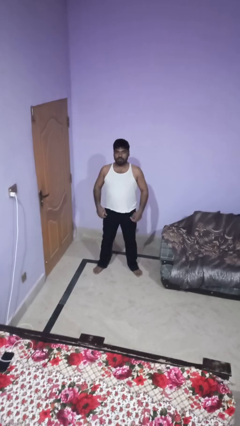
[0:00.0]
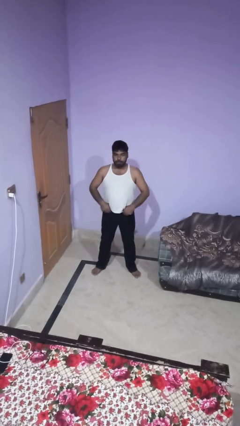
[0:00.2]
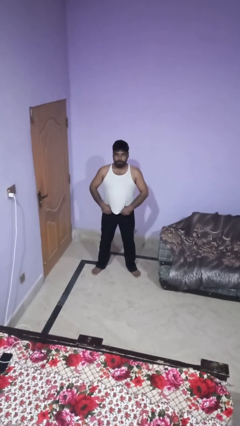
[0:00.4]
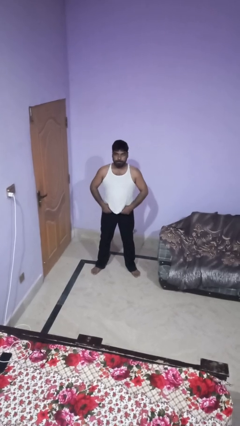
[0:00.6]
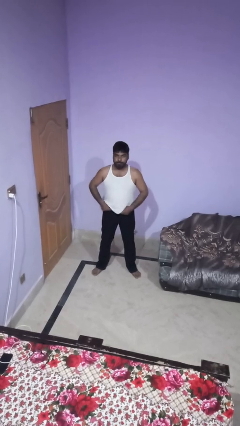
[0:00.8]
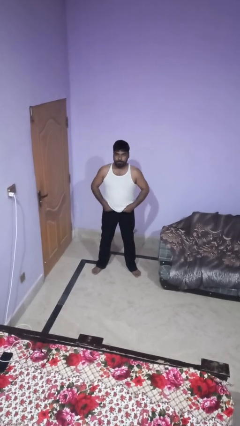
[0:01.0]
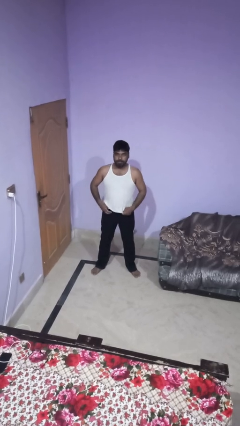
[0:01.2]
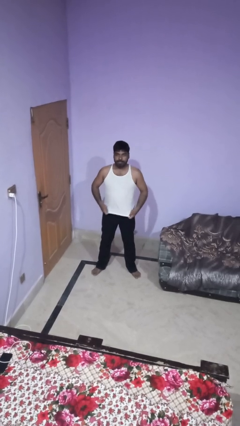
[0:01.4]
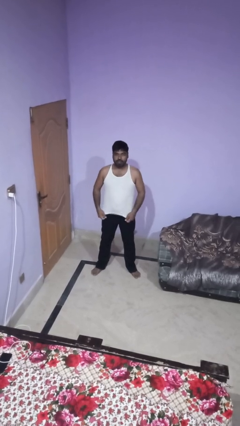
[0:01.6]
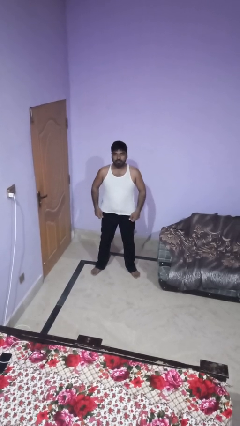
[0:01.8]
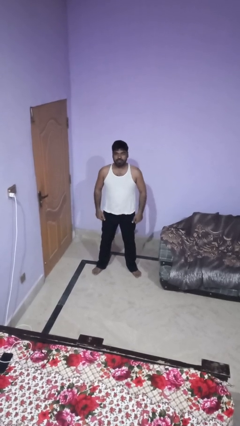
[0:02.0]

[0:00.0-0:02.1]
person hikes up pants

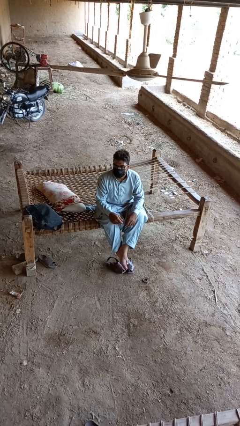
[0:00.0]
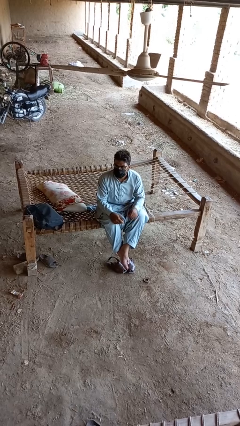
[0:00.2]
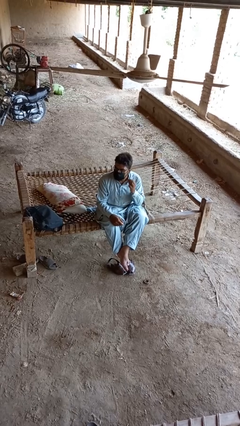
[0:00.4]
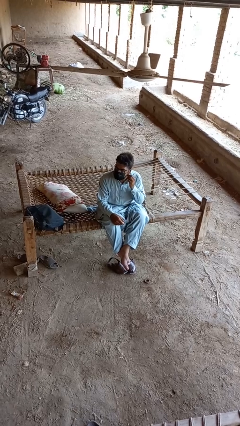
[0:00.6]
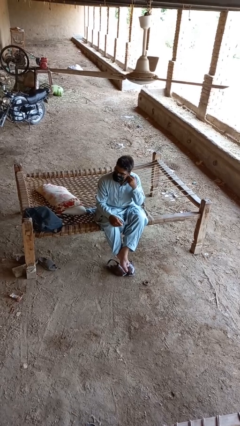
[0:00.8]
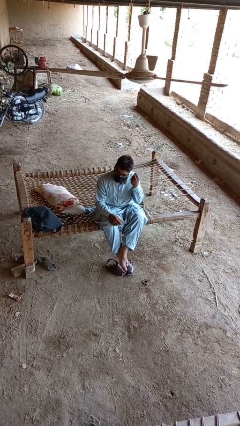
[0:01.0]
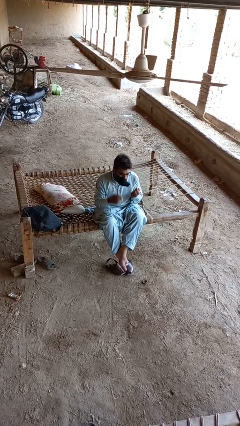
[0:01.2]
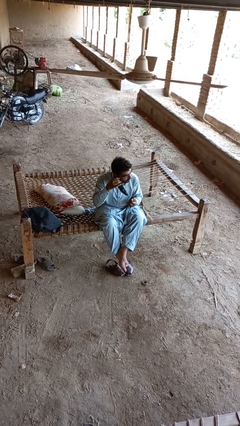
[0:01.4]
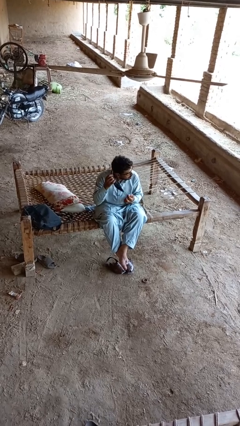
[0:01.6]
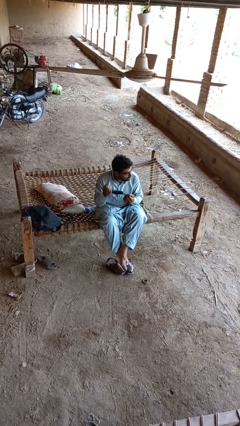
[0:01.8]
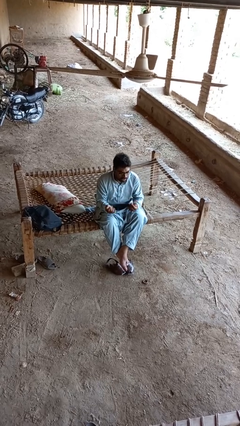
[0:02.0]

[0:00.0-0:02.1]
person takes off facemask

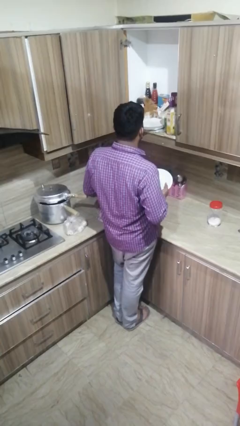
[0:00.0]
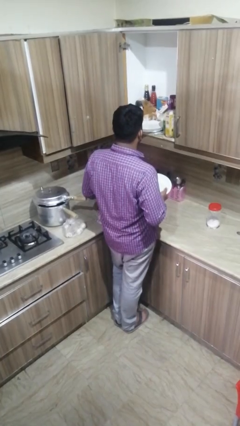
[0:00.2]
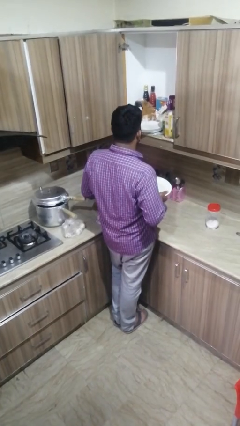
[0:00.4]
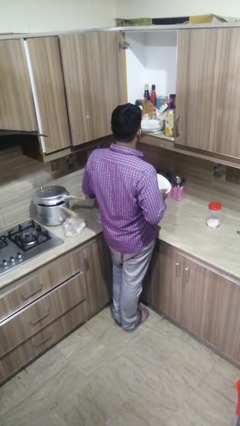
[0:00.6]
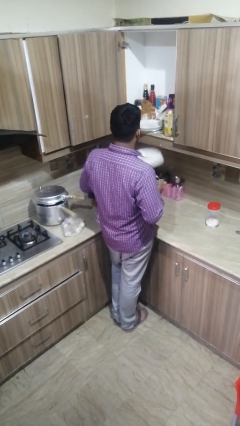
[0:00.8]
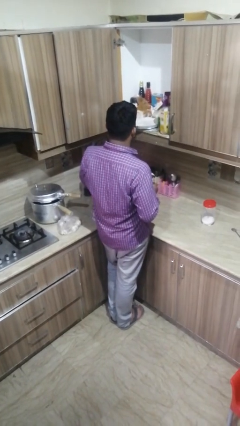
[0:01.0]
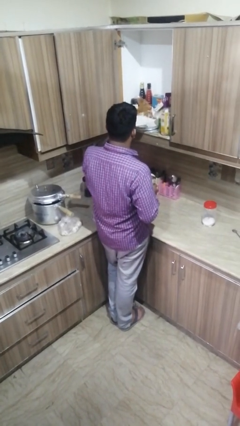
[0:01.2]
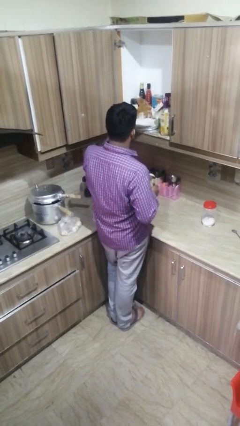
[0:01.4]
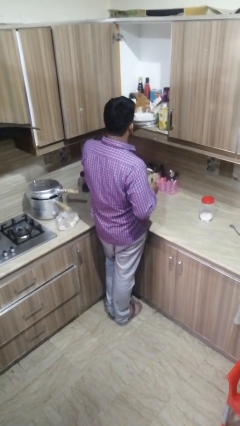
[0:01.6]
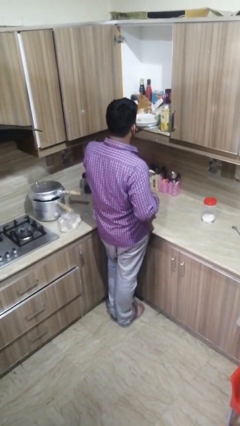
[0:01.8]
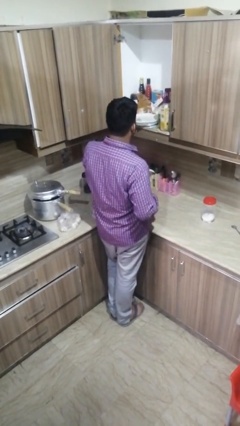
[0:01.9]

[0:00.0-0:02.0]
person puts object in cabinet

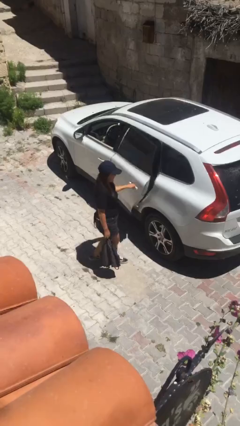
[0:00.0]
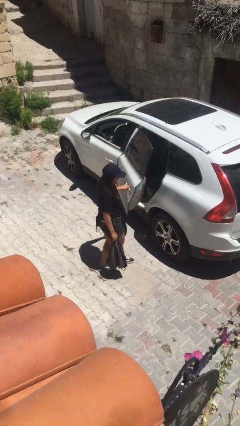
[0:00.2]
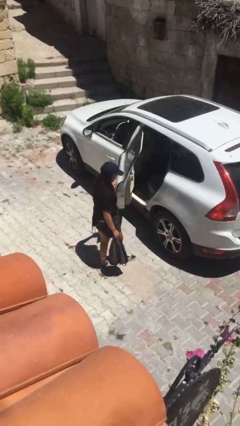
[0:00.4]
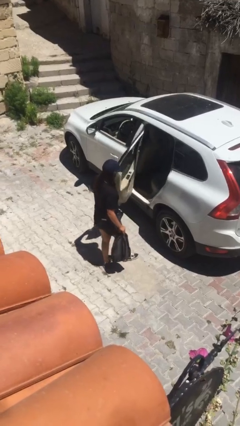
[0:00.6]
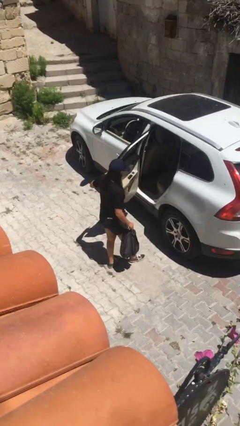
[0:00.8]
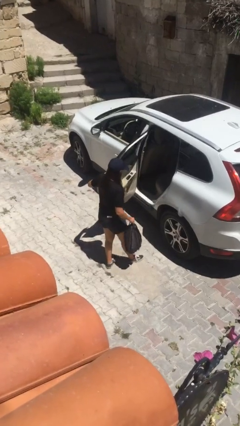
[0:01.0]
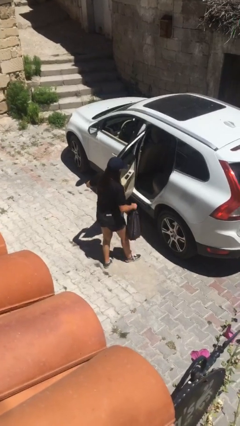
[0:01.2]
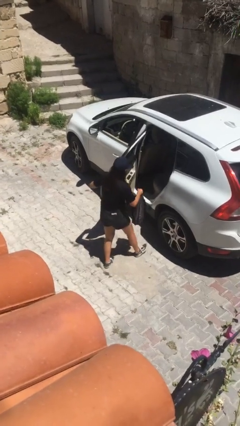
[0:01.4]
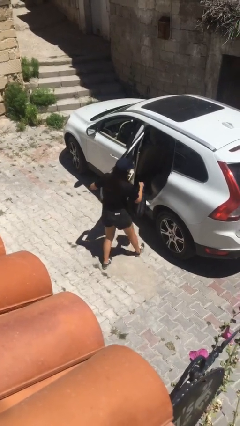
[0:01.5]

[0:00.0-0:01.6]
person opens car door

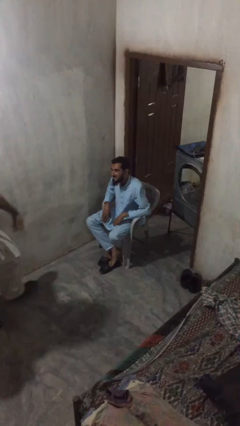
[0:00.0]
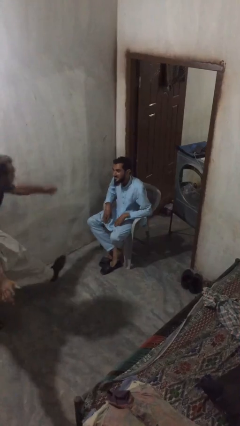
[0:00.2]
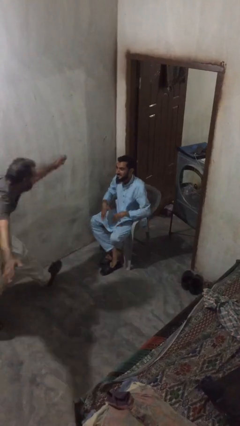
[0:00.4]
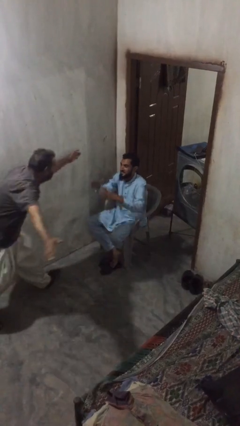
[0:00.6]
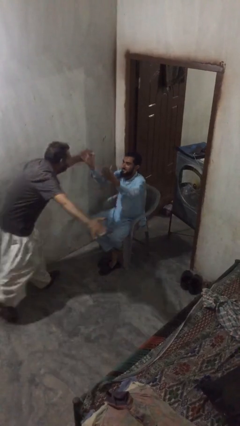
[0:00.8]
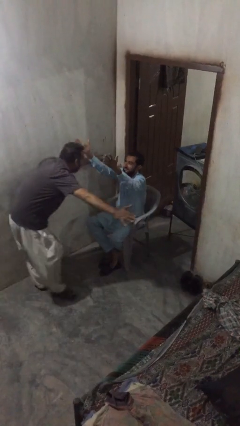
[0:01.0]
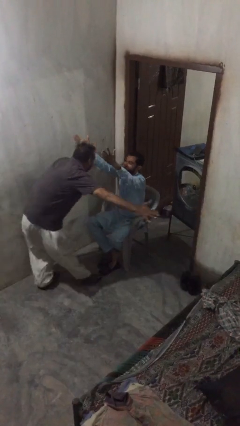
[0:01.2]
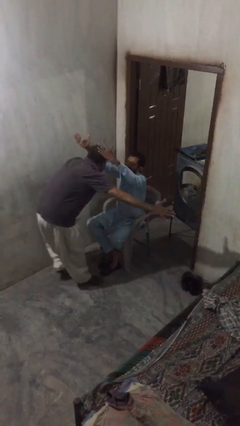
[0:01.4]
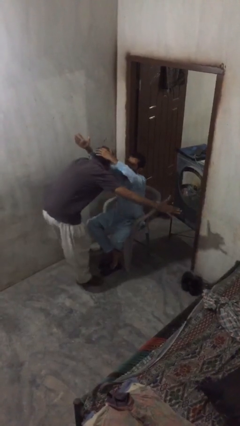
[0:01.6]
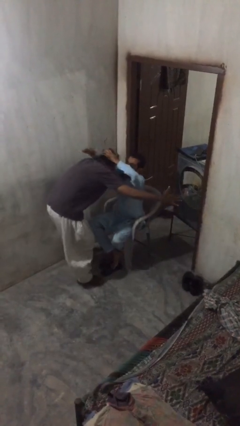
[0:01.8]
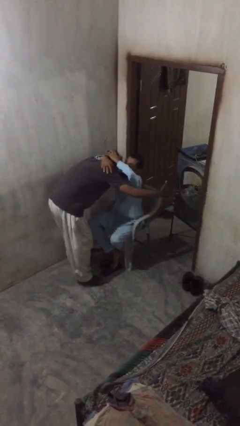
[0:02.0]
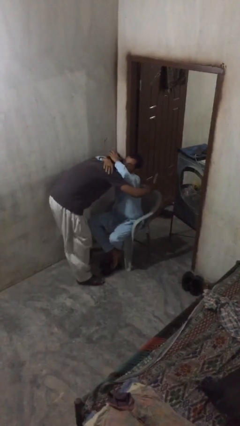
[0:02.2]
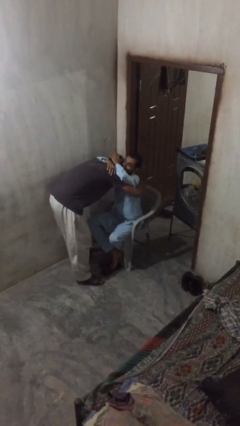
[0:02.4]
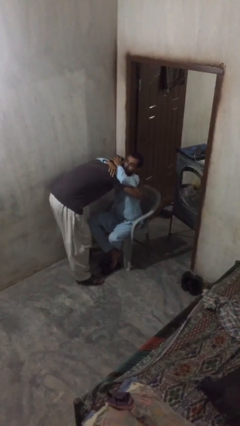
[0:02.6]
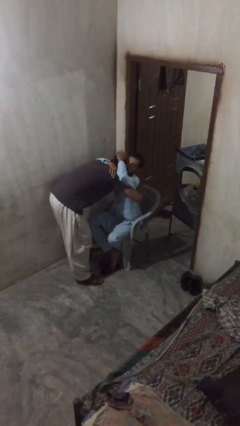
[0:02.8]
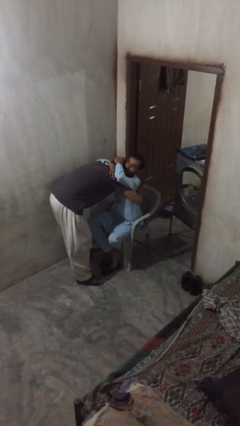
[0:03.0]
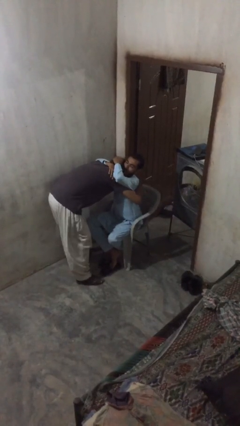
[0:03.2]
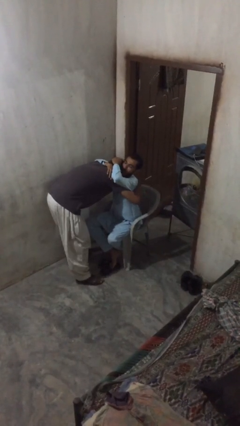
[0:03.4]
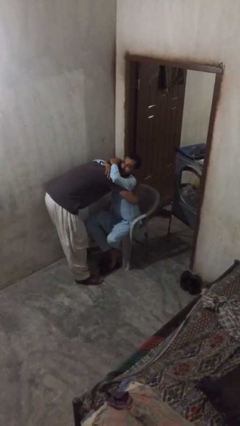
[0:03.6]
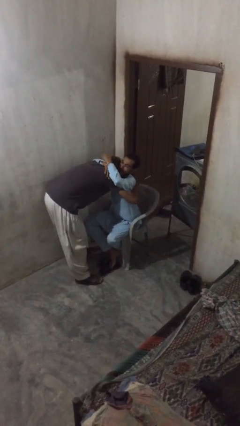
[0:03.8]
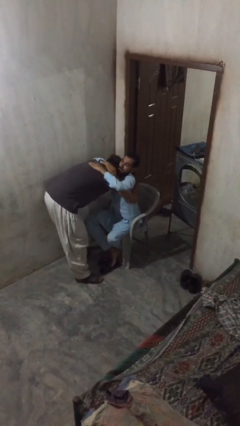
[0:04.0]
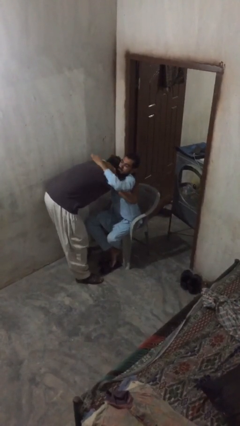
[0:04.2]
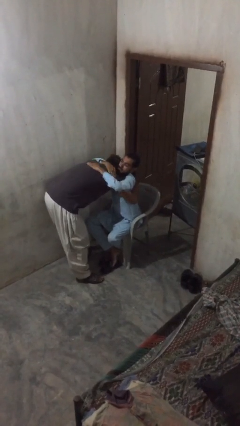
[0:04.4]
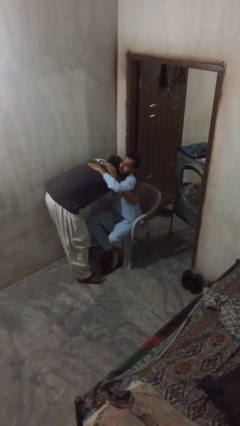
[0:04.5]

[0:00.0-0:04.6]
person embraces person

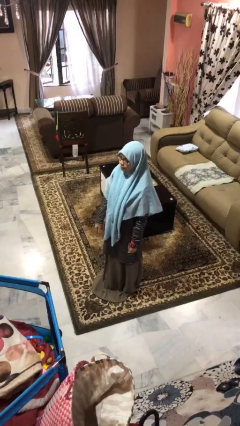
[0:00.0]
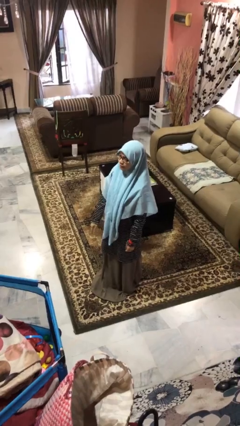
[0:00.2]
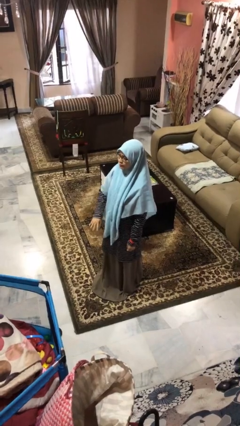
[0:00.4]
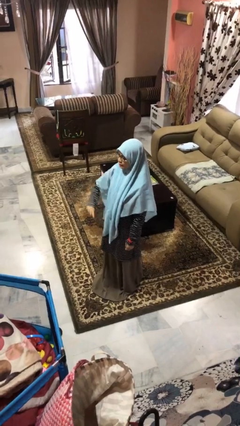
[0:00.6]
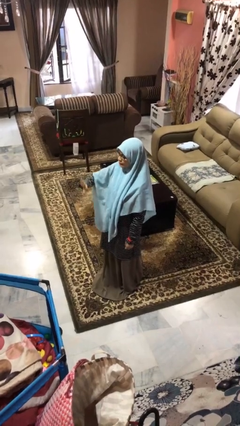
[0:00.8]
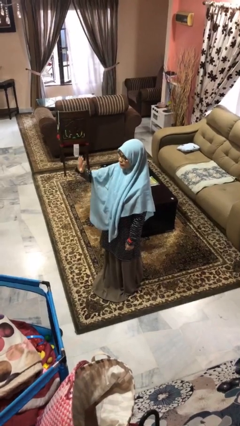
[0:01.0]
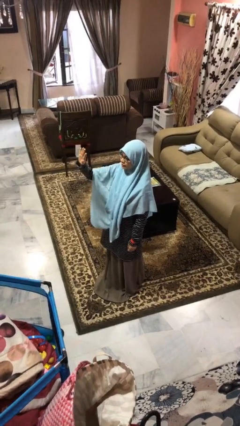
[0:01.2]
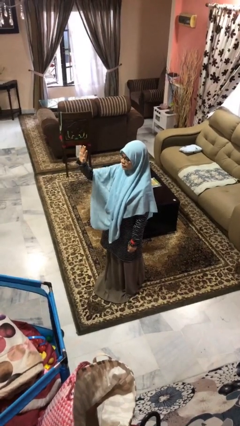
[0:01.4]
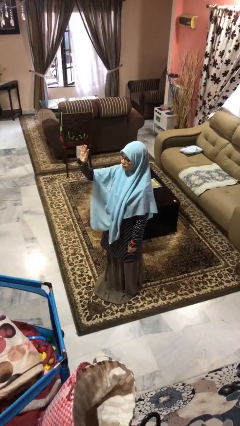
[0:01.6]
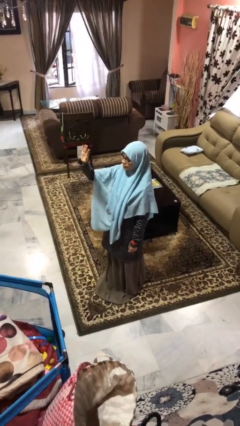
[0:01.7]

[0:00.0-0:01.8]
person gestures swipe up

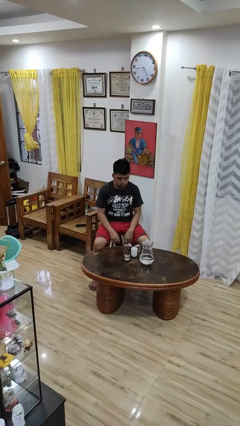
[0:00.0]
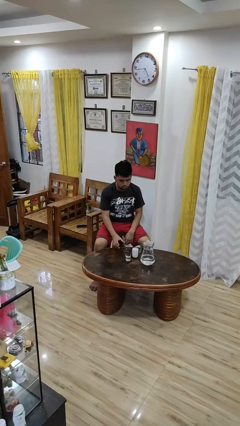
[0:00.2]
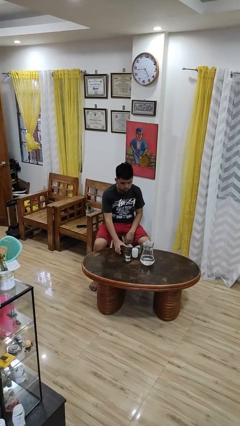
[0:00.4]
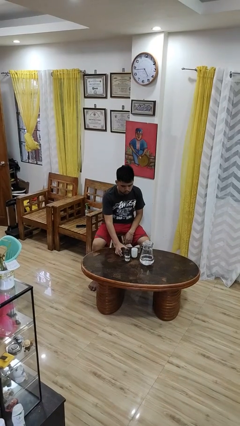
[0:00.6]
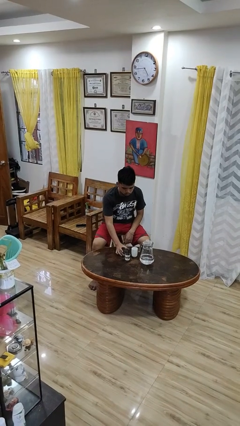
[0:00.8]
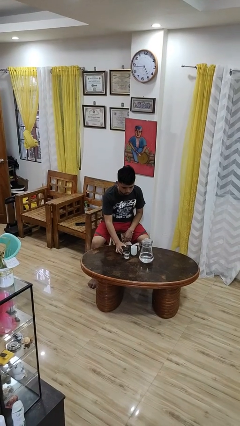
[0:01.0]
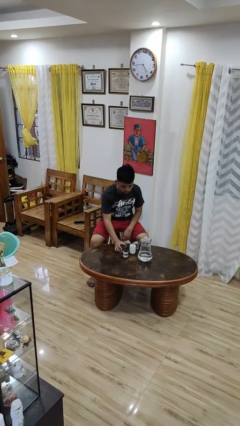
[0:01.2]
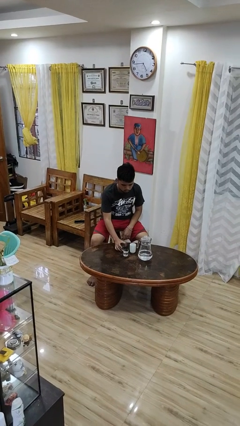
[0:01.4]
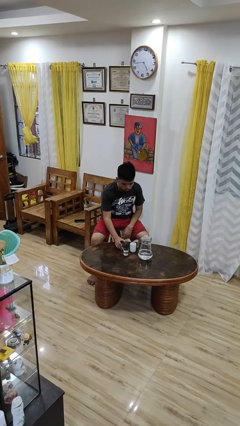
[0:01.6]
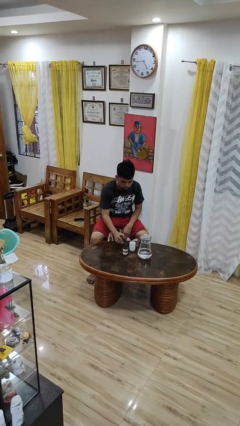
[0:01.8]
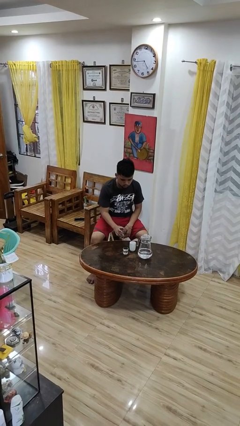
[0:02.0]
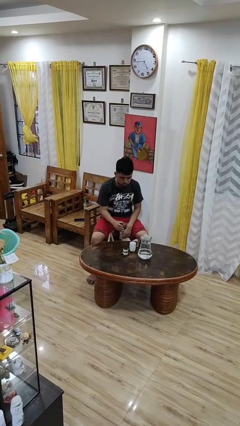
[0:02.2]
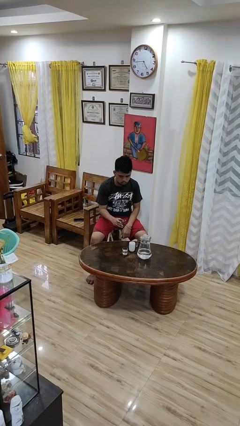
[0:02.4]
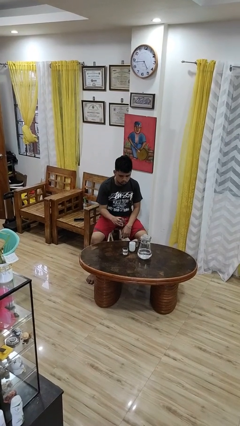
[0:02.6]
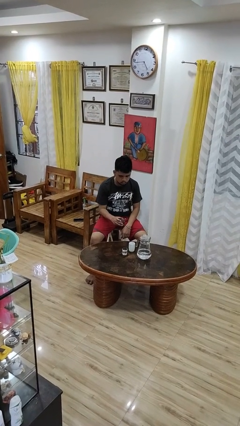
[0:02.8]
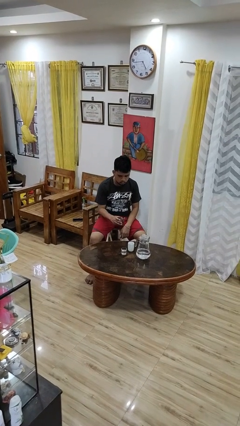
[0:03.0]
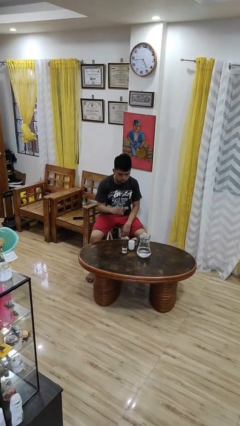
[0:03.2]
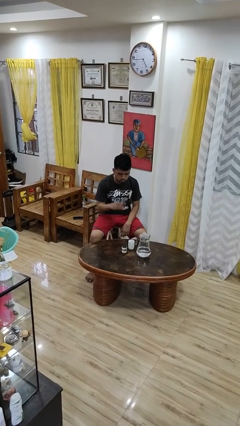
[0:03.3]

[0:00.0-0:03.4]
person picks up object from table
